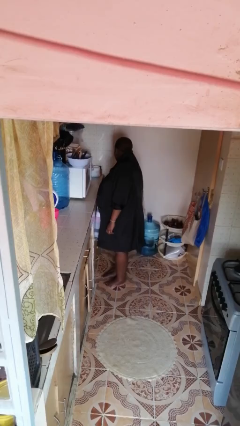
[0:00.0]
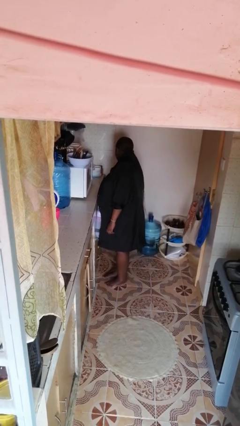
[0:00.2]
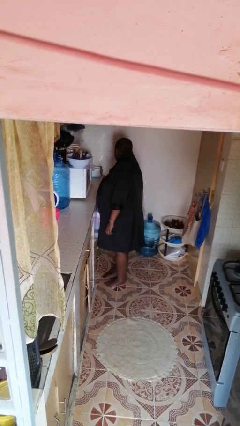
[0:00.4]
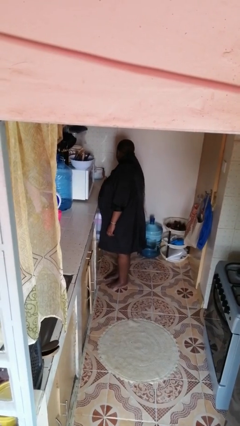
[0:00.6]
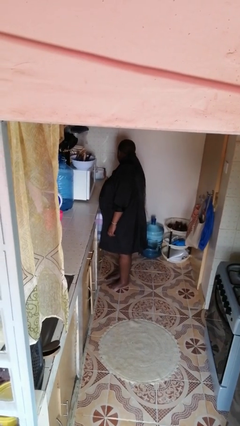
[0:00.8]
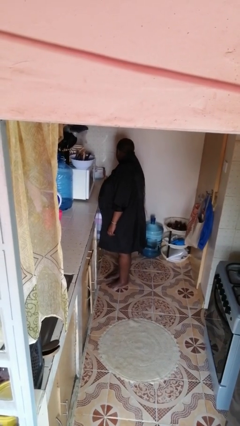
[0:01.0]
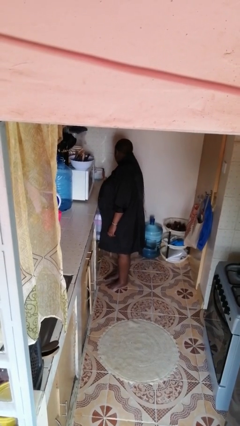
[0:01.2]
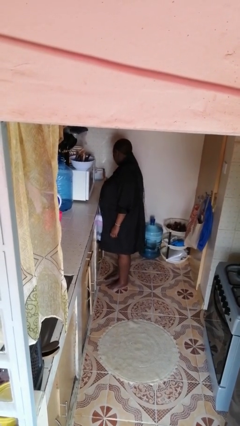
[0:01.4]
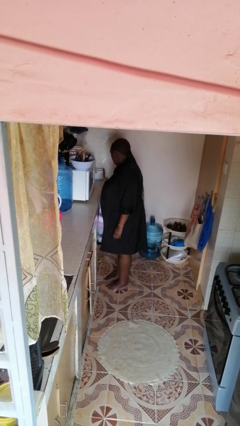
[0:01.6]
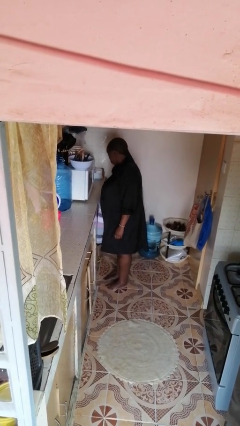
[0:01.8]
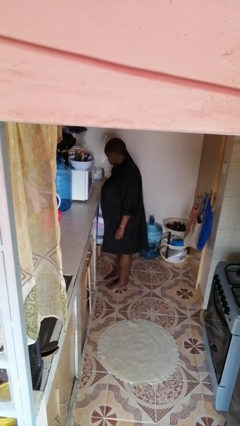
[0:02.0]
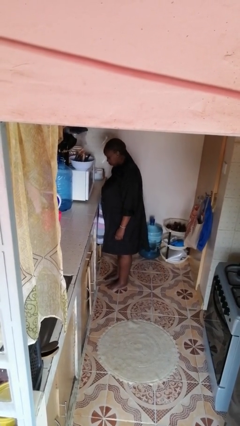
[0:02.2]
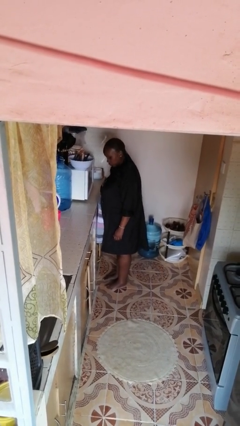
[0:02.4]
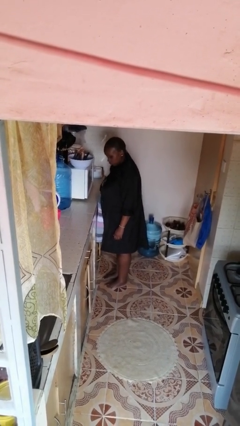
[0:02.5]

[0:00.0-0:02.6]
person closes cabinet

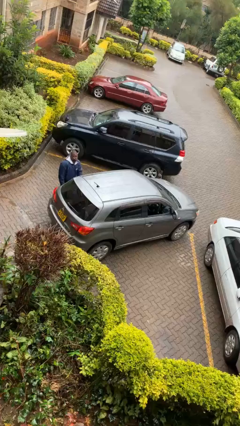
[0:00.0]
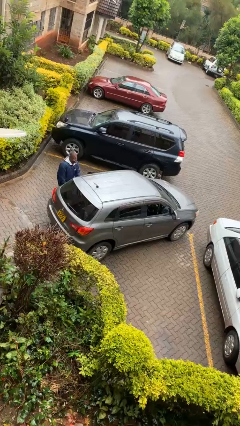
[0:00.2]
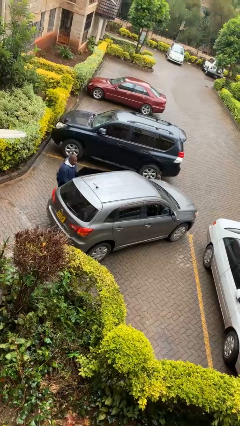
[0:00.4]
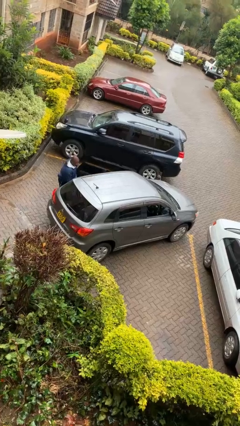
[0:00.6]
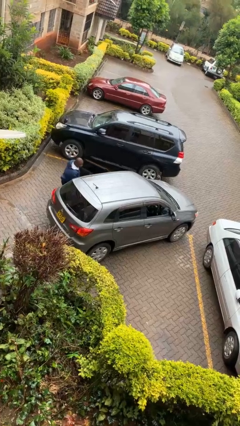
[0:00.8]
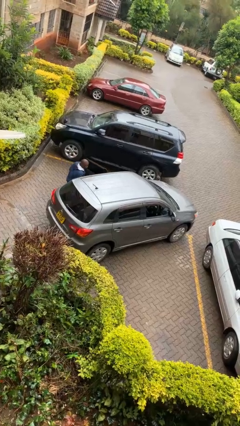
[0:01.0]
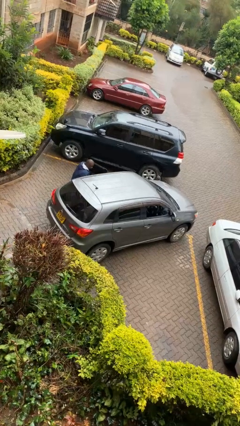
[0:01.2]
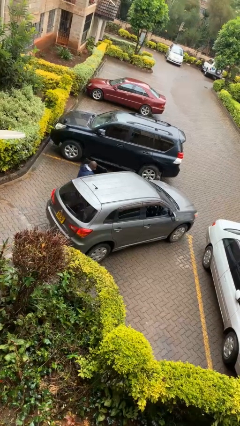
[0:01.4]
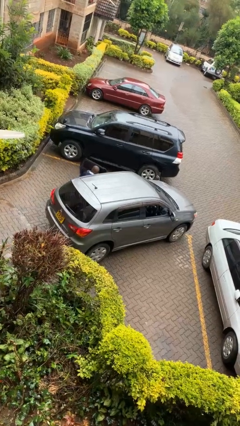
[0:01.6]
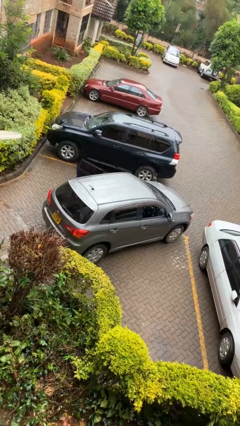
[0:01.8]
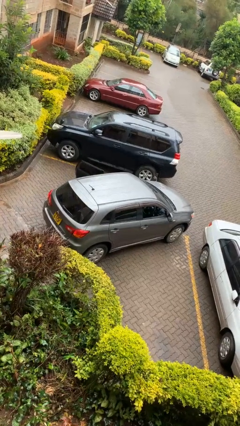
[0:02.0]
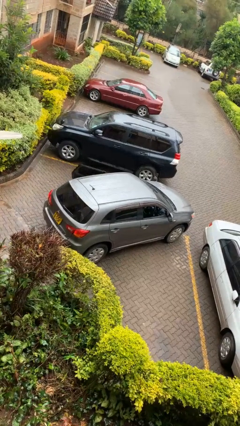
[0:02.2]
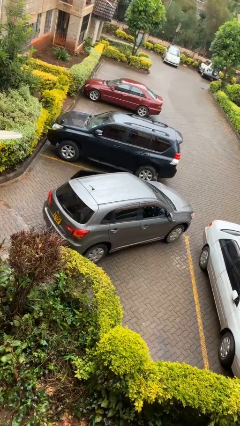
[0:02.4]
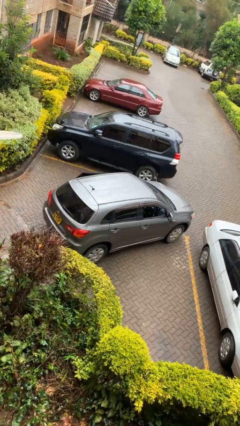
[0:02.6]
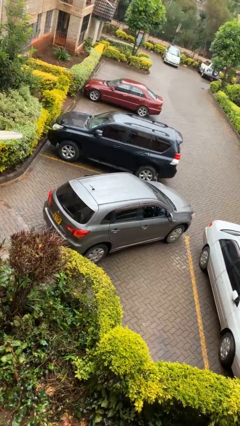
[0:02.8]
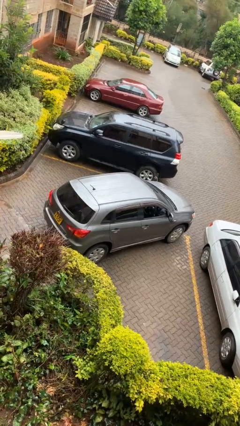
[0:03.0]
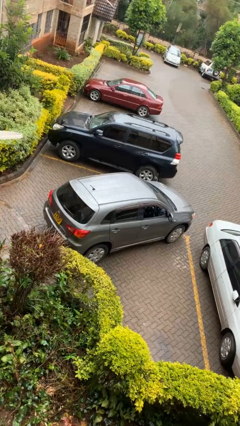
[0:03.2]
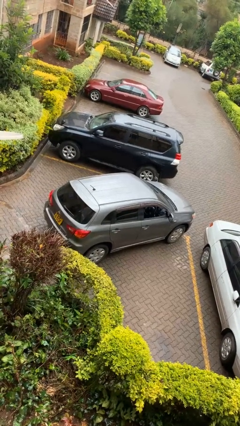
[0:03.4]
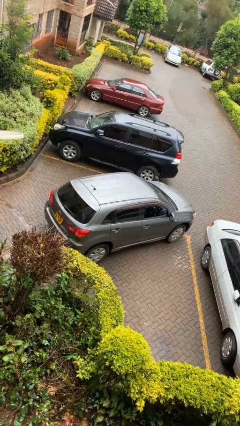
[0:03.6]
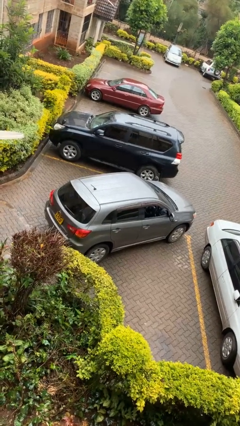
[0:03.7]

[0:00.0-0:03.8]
car picks up person

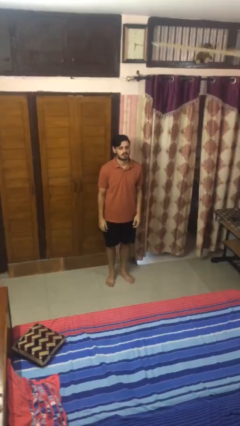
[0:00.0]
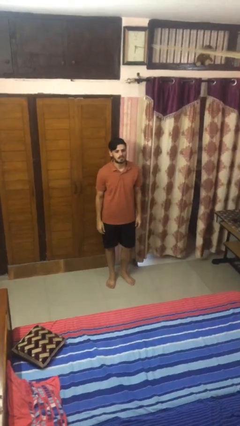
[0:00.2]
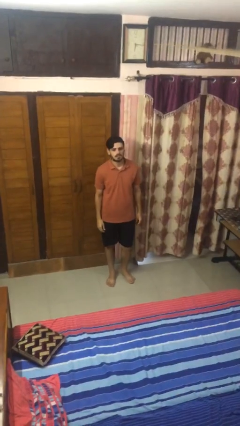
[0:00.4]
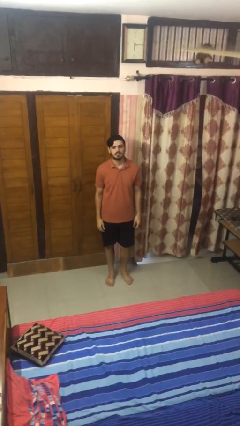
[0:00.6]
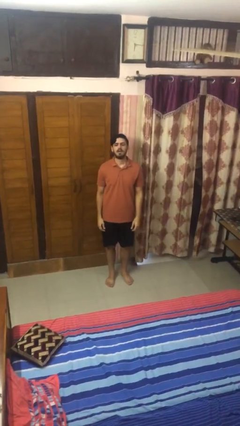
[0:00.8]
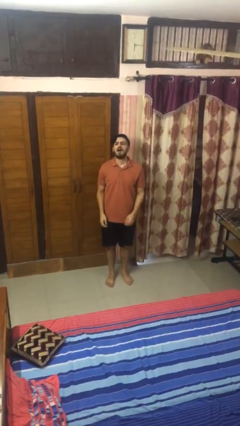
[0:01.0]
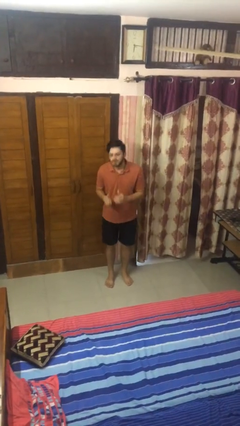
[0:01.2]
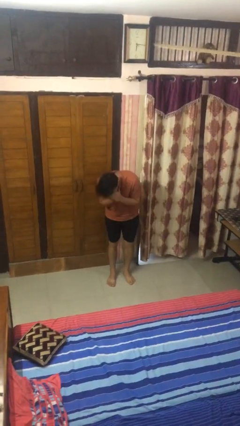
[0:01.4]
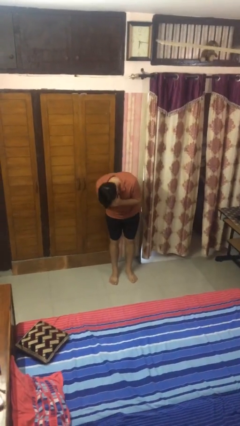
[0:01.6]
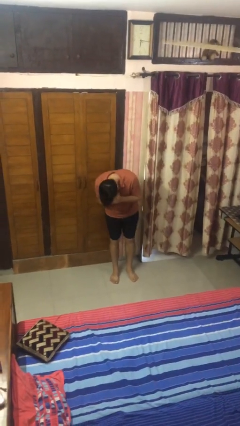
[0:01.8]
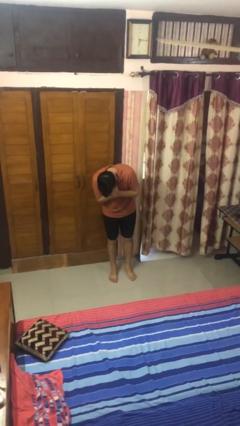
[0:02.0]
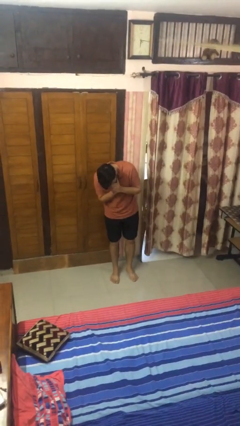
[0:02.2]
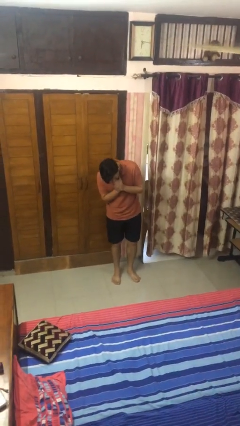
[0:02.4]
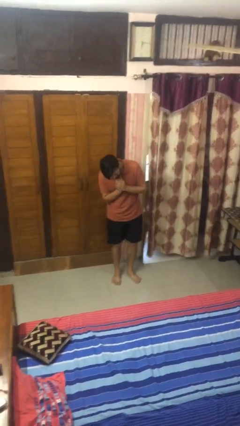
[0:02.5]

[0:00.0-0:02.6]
person sneezes into hand

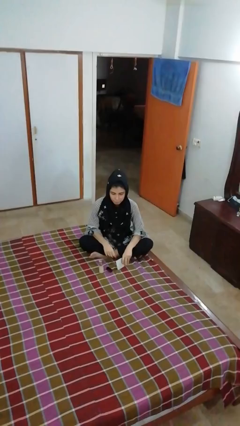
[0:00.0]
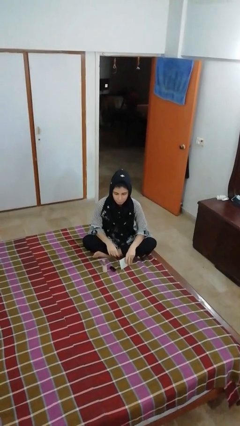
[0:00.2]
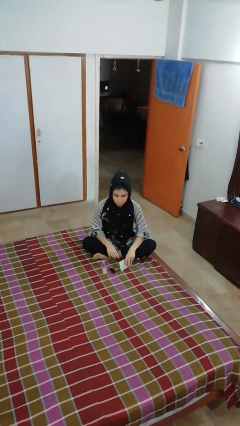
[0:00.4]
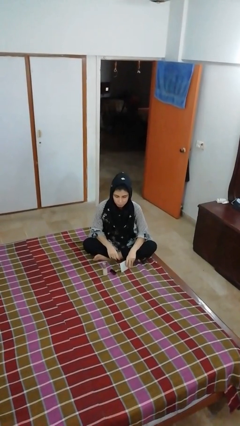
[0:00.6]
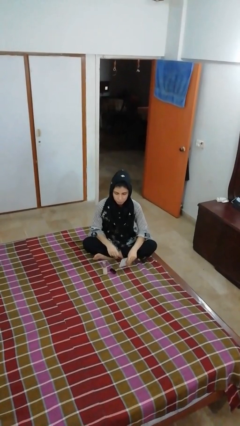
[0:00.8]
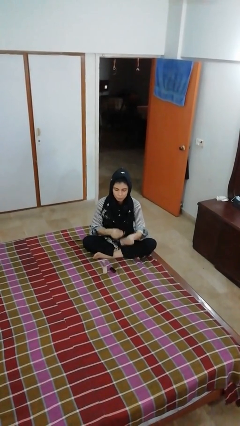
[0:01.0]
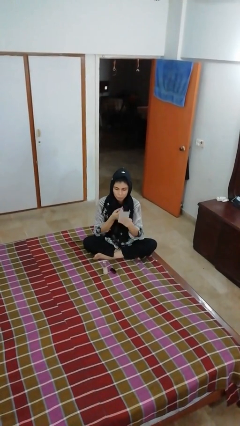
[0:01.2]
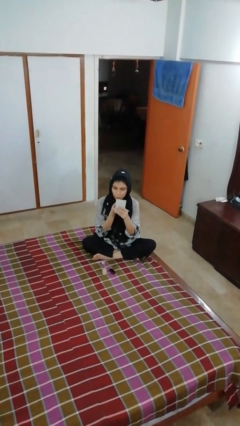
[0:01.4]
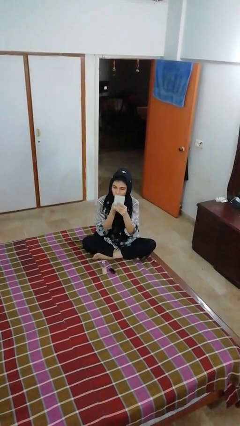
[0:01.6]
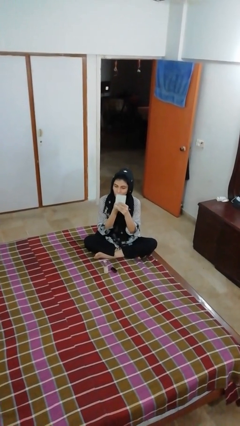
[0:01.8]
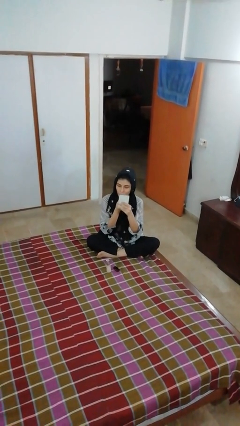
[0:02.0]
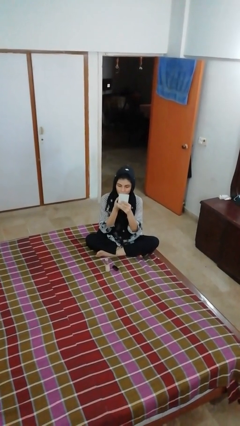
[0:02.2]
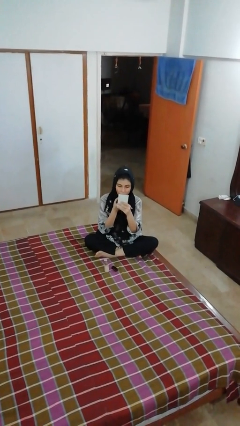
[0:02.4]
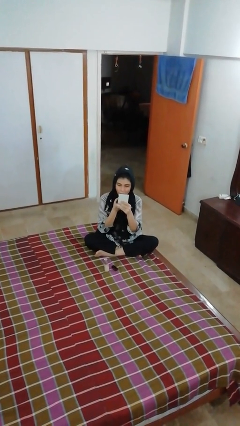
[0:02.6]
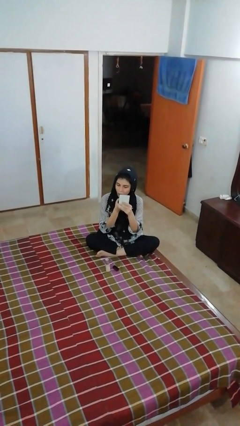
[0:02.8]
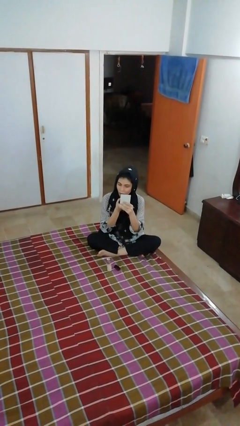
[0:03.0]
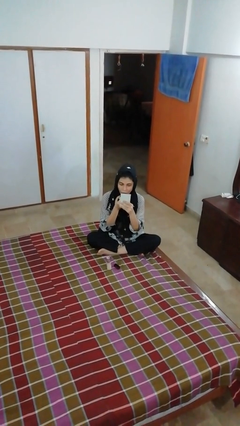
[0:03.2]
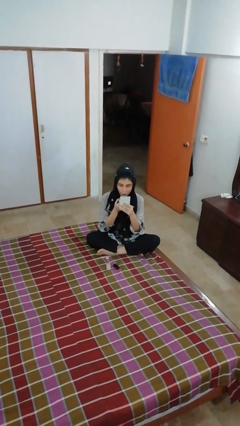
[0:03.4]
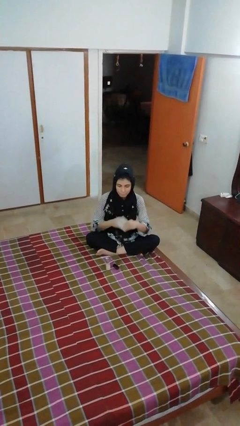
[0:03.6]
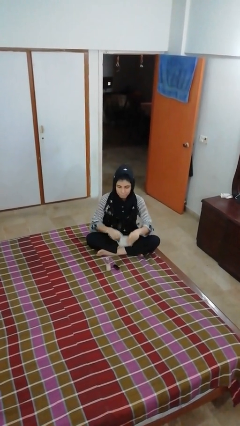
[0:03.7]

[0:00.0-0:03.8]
person applies lip makeup

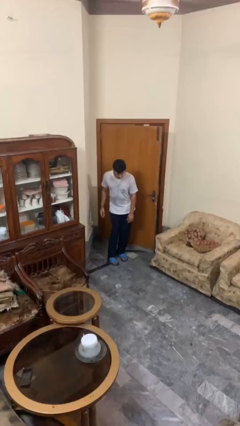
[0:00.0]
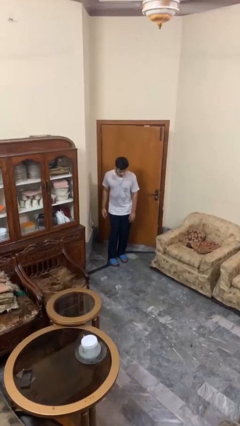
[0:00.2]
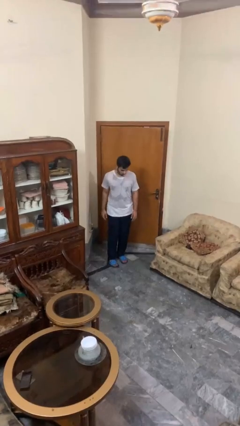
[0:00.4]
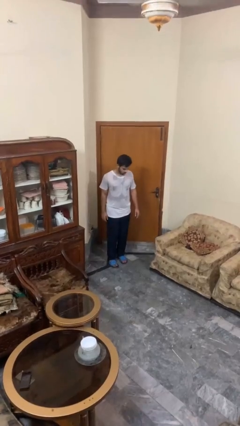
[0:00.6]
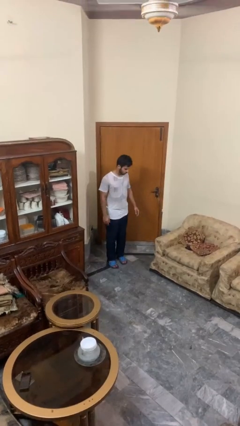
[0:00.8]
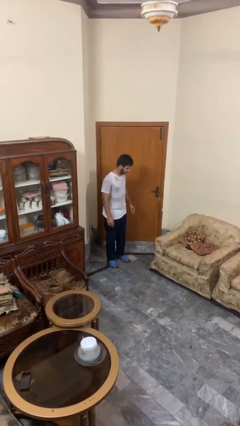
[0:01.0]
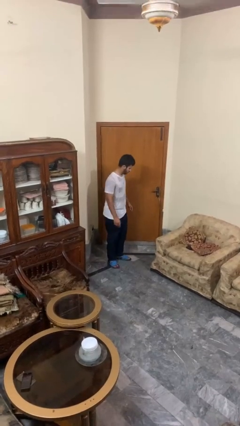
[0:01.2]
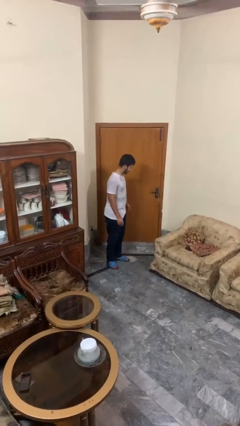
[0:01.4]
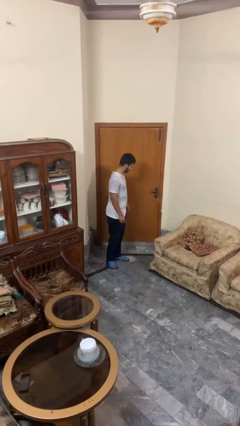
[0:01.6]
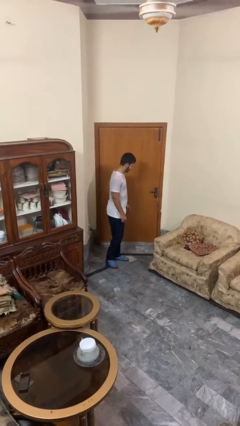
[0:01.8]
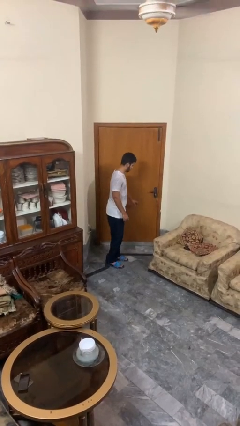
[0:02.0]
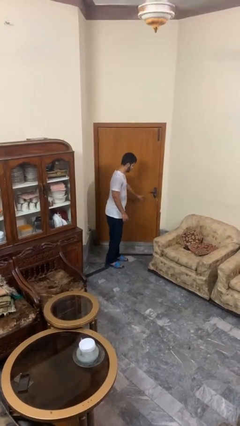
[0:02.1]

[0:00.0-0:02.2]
person closes door with hip

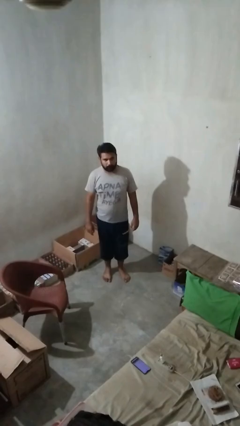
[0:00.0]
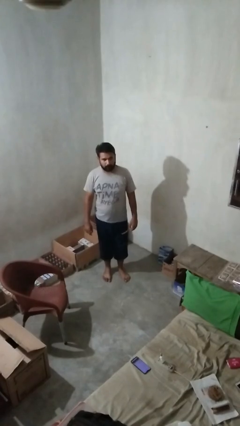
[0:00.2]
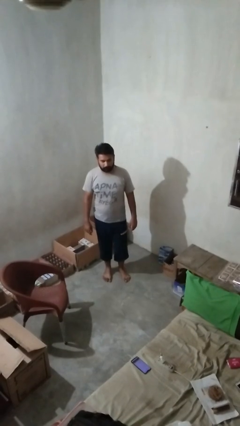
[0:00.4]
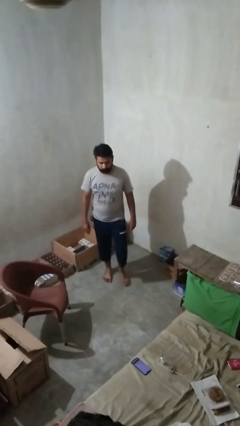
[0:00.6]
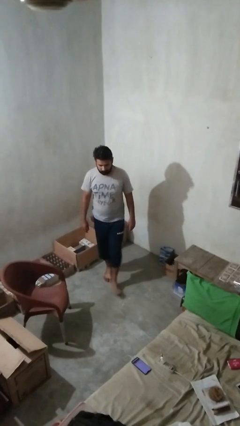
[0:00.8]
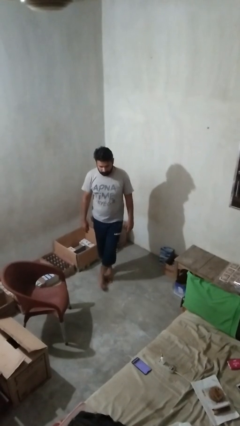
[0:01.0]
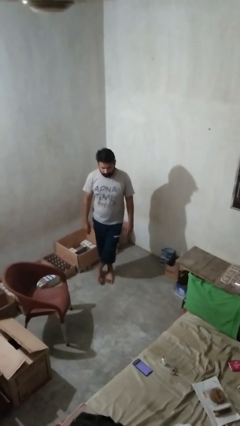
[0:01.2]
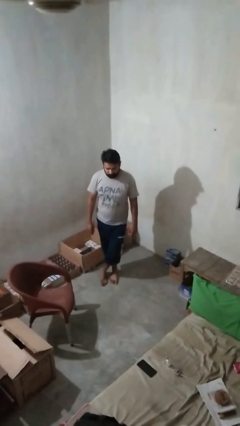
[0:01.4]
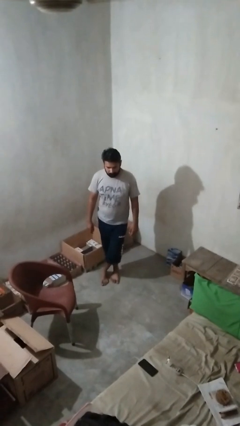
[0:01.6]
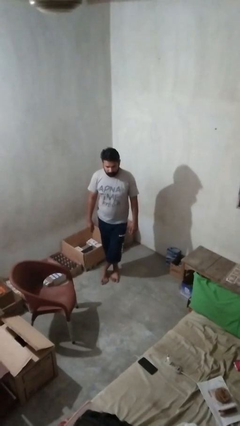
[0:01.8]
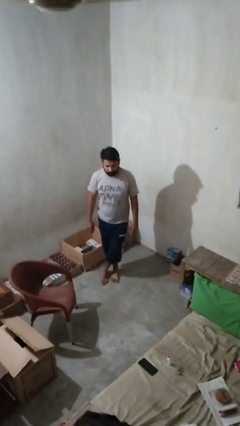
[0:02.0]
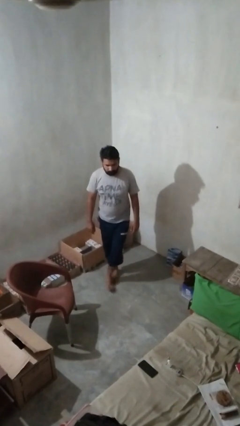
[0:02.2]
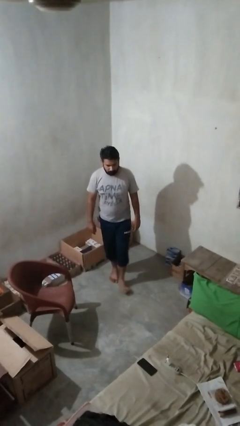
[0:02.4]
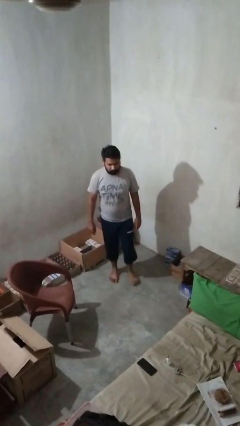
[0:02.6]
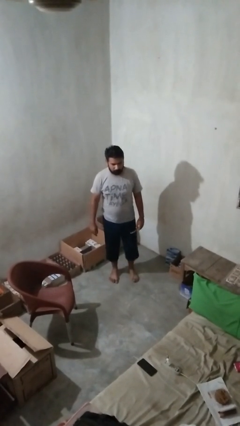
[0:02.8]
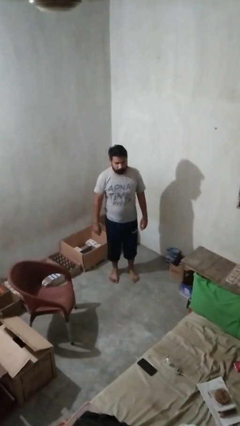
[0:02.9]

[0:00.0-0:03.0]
person crosses legs
